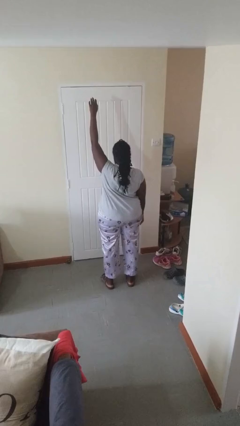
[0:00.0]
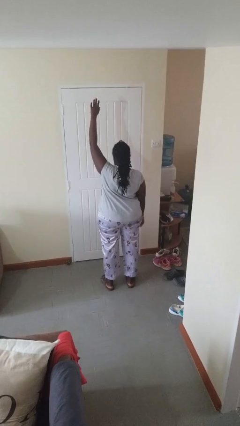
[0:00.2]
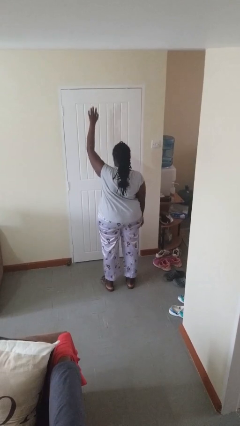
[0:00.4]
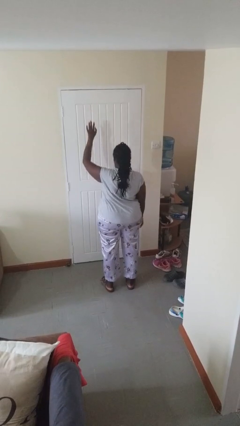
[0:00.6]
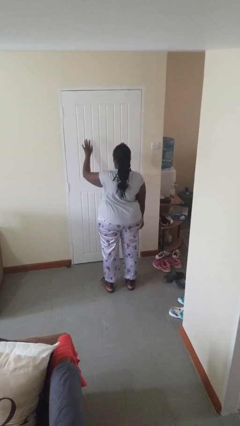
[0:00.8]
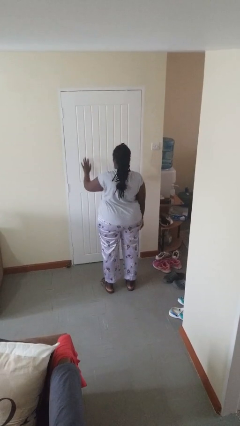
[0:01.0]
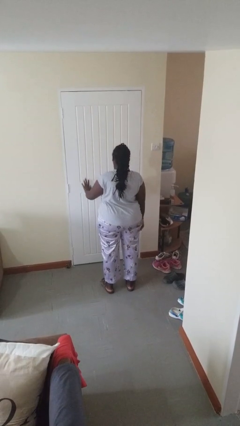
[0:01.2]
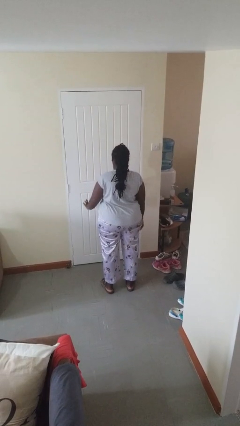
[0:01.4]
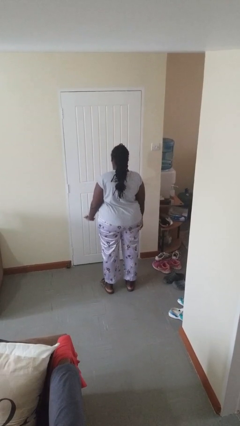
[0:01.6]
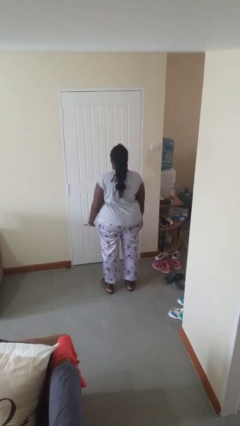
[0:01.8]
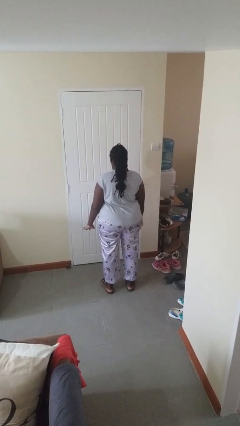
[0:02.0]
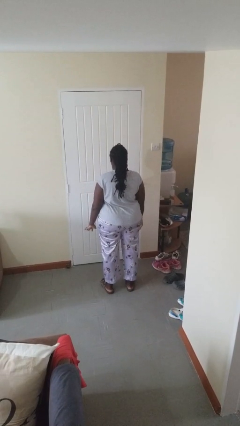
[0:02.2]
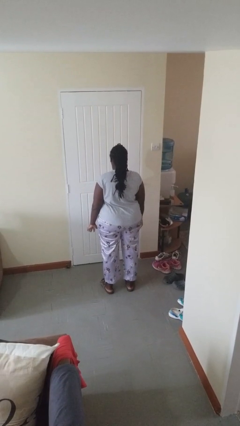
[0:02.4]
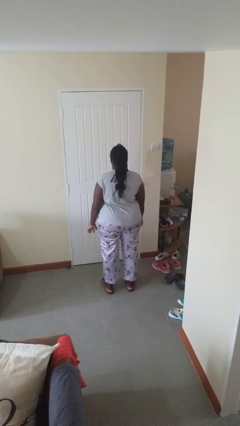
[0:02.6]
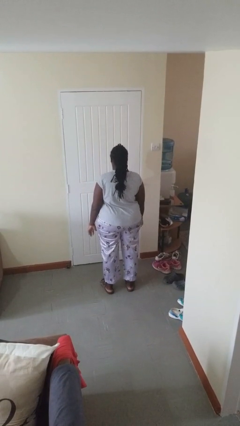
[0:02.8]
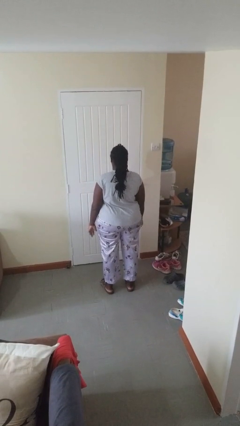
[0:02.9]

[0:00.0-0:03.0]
person gestures swipe down

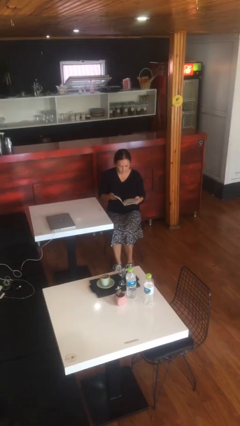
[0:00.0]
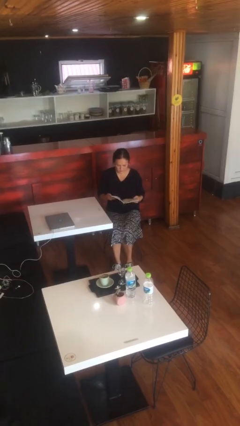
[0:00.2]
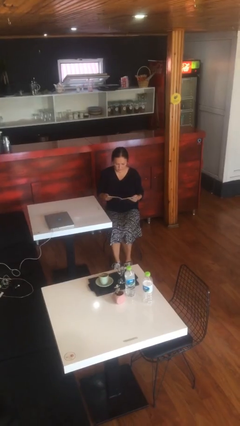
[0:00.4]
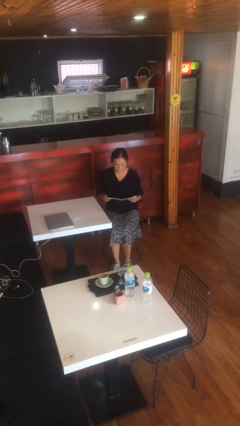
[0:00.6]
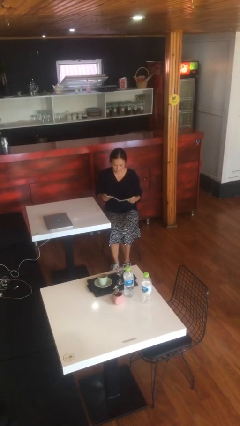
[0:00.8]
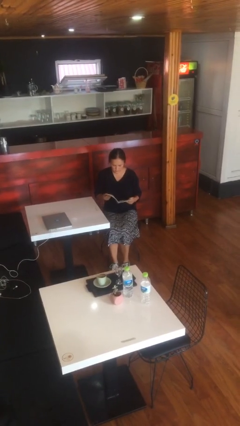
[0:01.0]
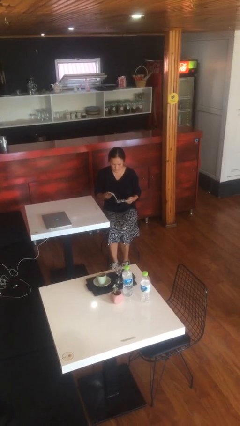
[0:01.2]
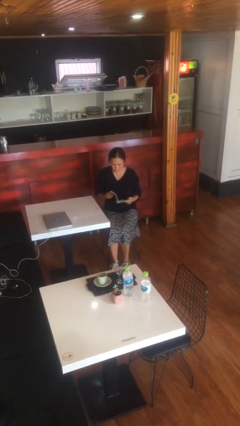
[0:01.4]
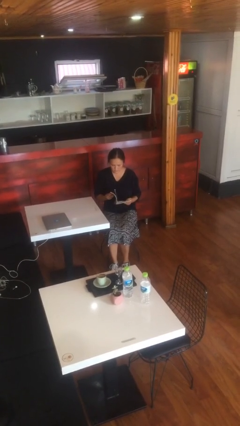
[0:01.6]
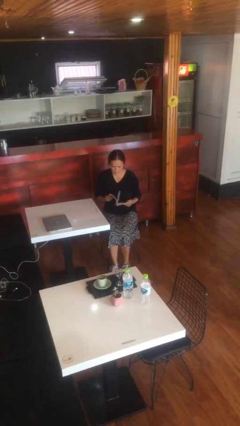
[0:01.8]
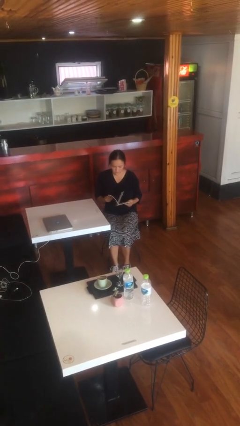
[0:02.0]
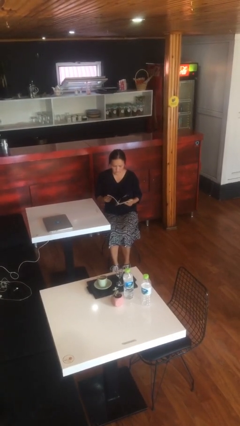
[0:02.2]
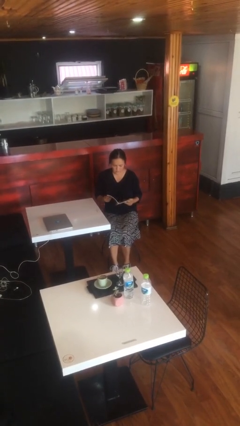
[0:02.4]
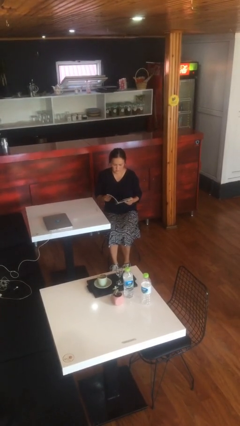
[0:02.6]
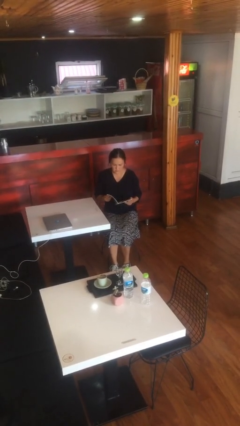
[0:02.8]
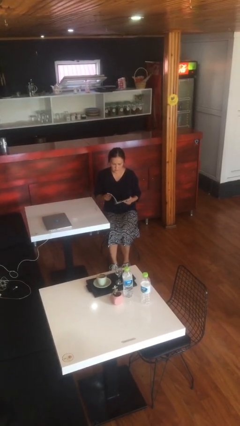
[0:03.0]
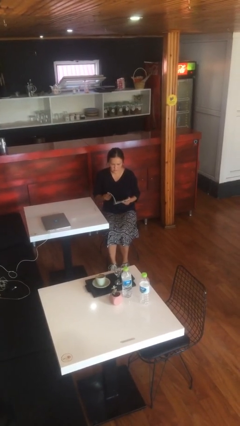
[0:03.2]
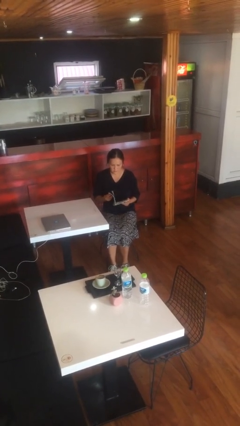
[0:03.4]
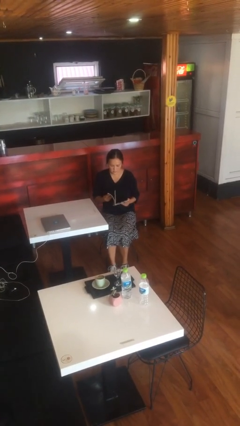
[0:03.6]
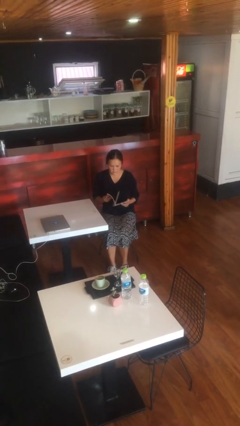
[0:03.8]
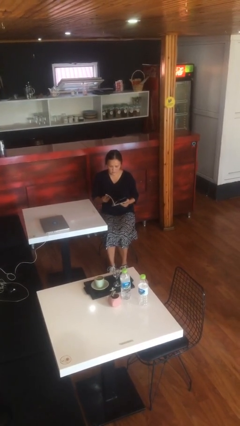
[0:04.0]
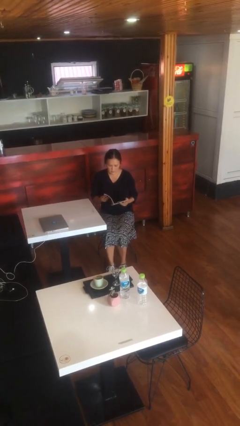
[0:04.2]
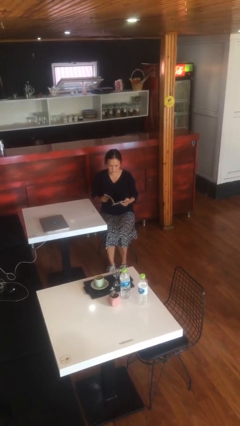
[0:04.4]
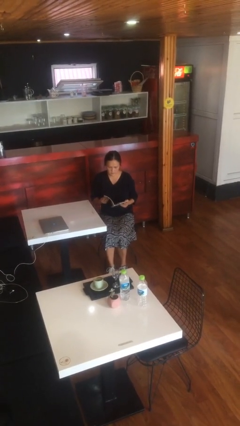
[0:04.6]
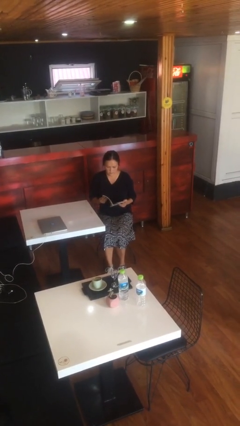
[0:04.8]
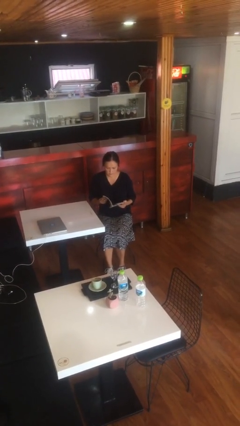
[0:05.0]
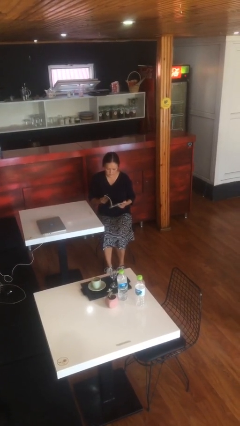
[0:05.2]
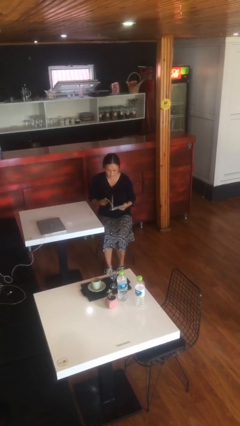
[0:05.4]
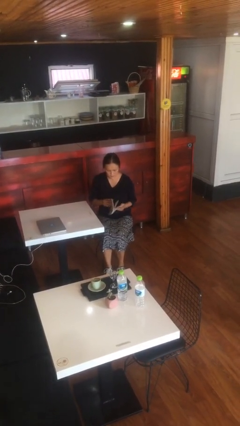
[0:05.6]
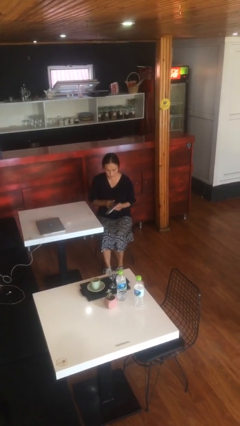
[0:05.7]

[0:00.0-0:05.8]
person reads document

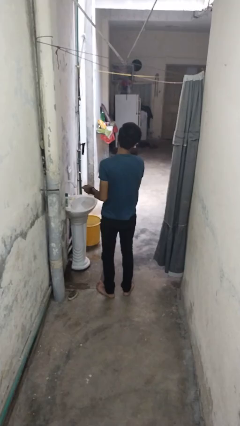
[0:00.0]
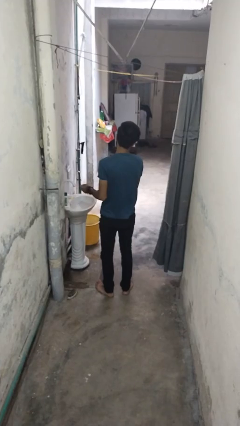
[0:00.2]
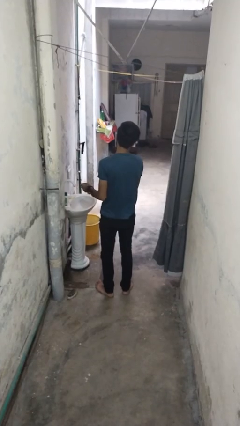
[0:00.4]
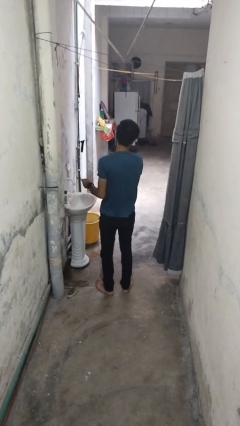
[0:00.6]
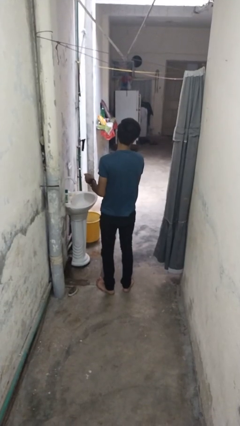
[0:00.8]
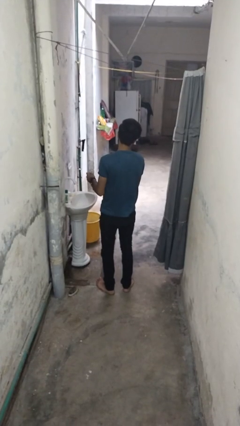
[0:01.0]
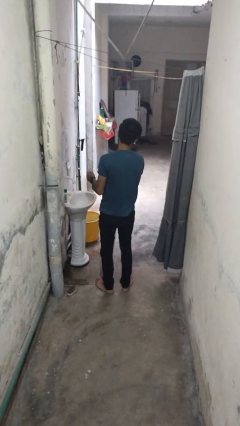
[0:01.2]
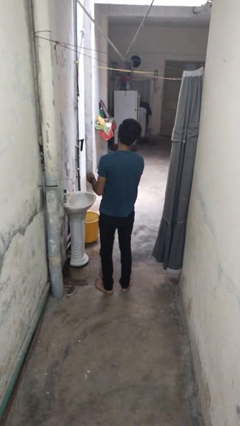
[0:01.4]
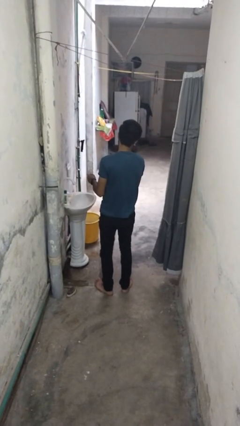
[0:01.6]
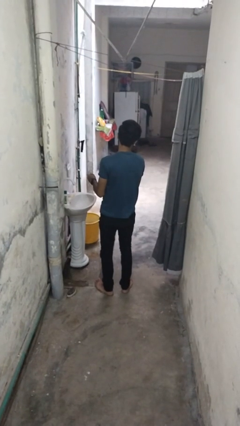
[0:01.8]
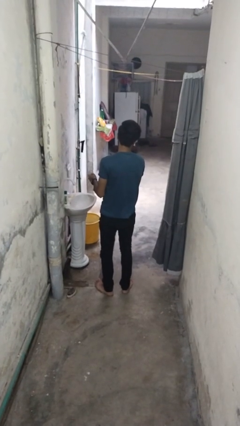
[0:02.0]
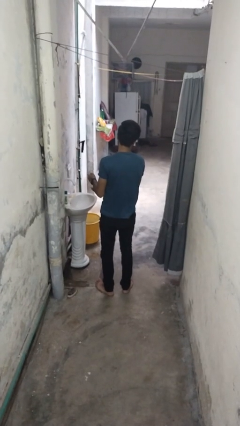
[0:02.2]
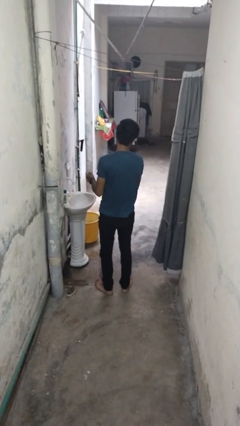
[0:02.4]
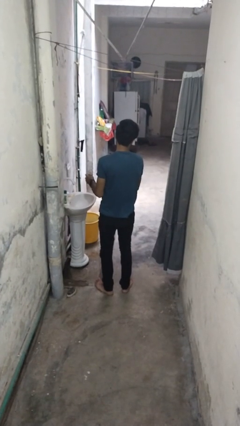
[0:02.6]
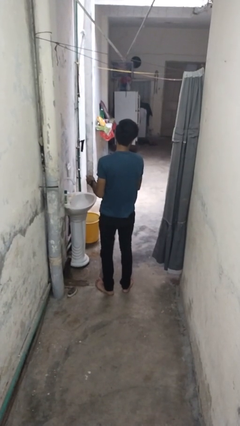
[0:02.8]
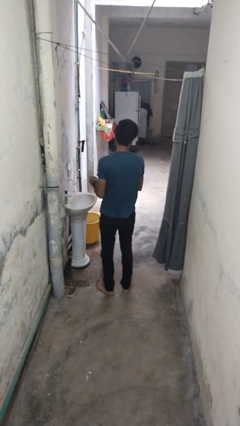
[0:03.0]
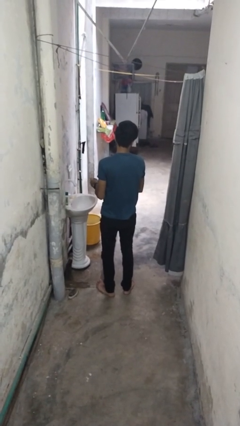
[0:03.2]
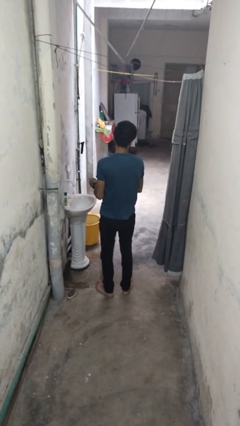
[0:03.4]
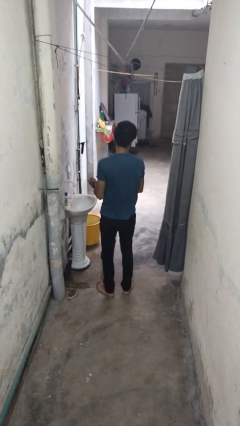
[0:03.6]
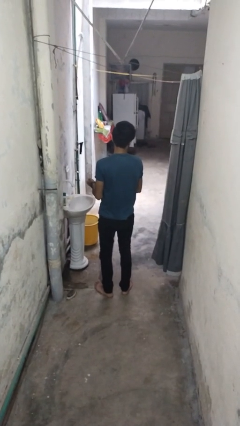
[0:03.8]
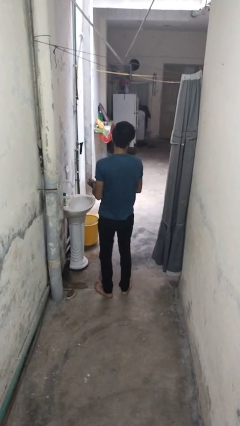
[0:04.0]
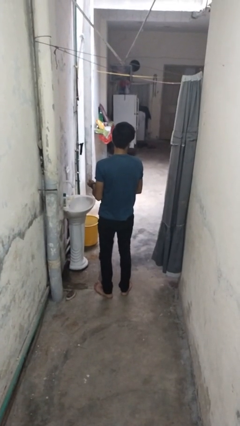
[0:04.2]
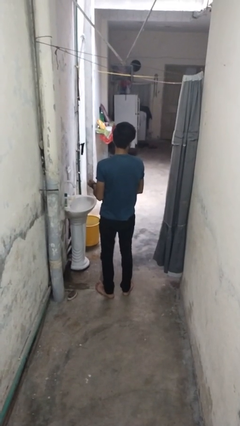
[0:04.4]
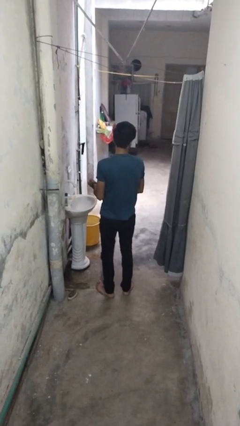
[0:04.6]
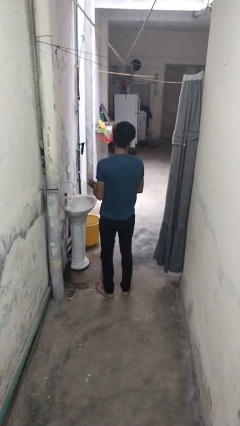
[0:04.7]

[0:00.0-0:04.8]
person puts on wristwatch

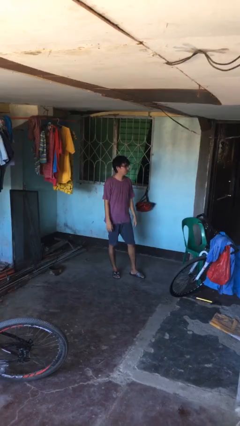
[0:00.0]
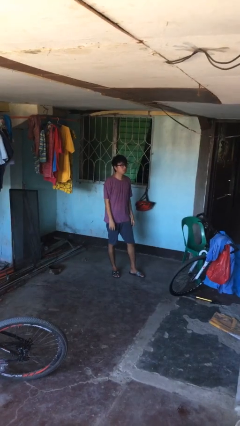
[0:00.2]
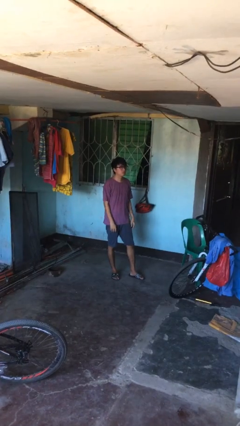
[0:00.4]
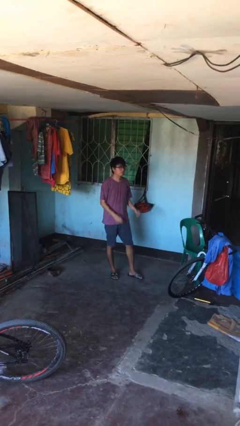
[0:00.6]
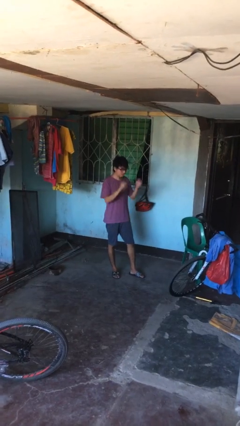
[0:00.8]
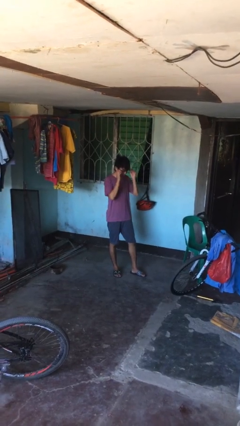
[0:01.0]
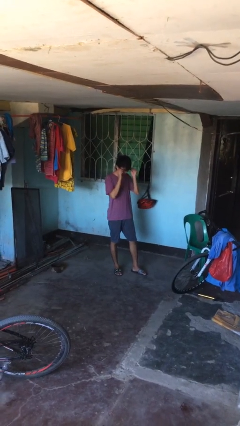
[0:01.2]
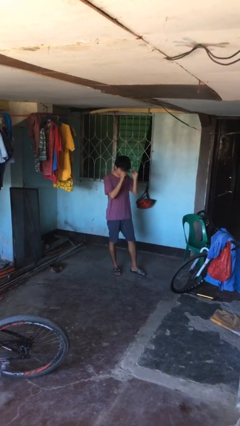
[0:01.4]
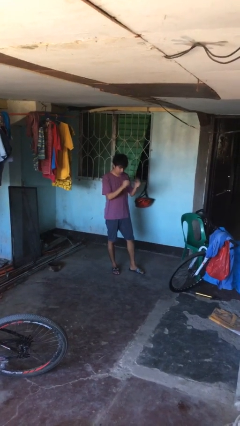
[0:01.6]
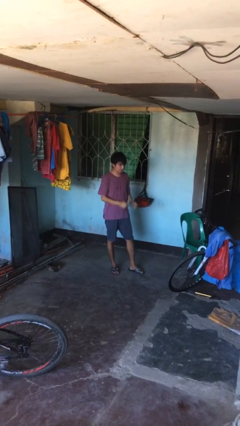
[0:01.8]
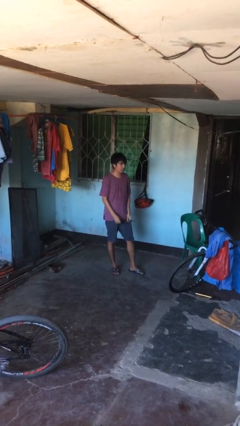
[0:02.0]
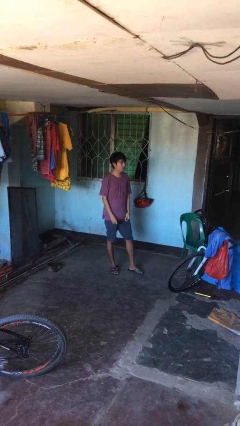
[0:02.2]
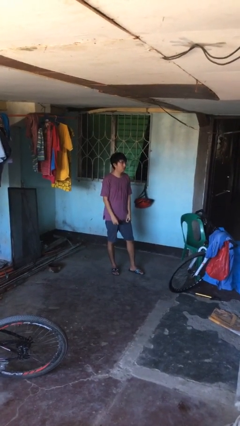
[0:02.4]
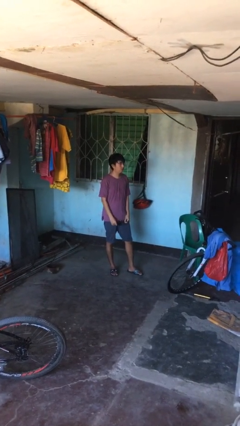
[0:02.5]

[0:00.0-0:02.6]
person takes off glasses

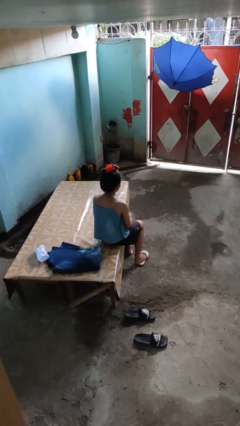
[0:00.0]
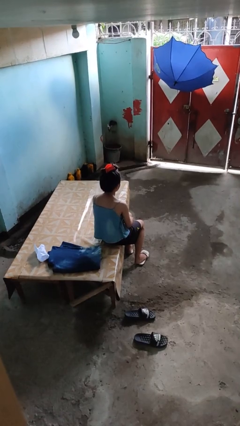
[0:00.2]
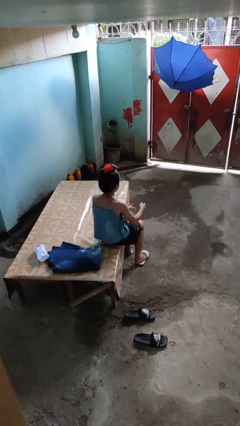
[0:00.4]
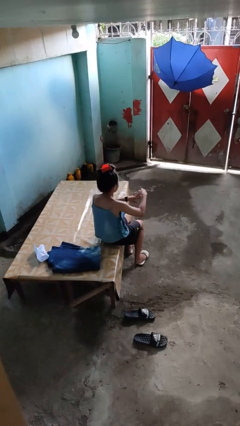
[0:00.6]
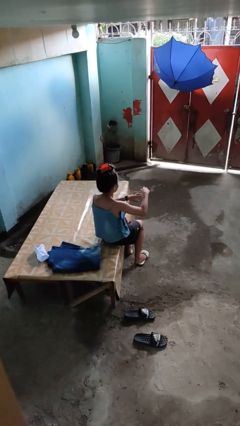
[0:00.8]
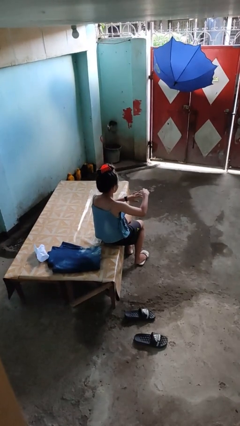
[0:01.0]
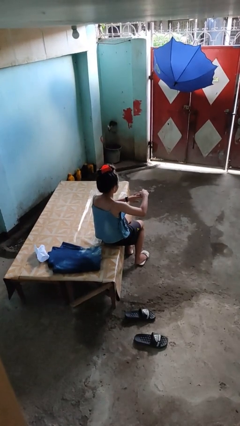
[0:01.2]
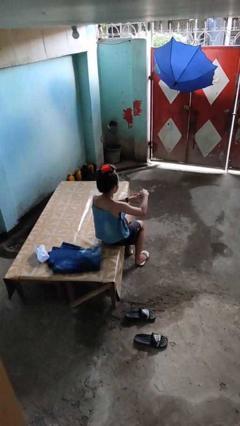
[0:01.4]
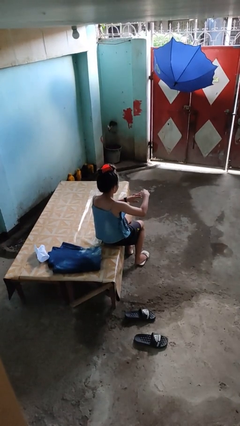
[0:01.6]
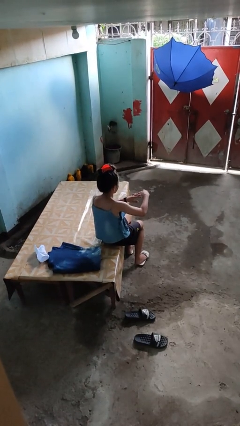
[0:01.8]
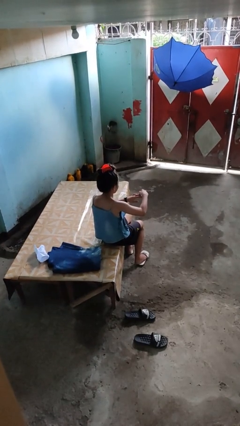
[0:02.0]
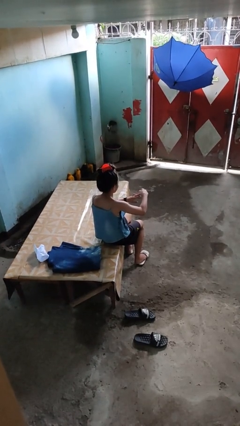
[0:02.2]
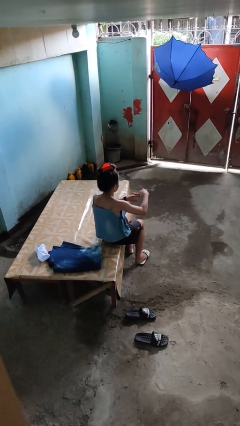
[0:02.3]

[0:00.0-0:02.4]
person files fingernails
